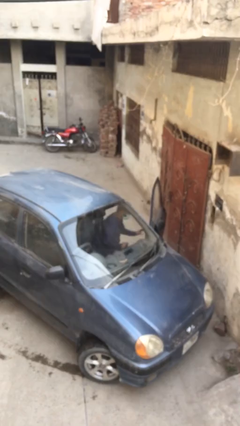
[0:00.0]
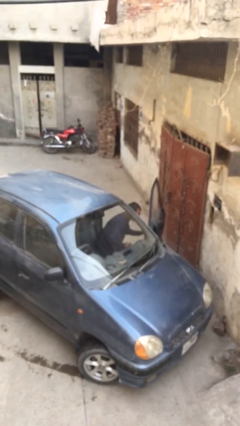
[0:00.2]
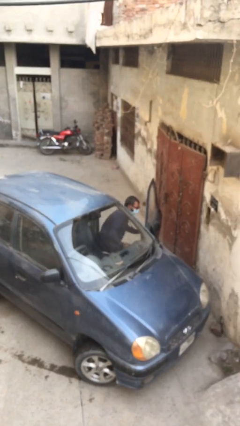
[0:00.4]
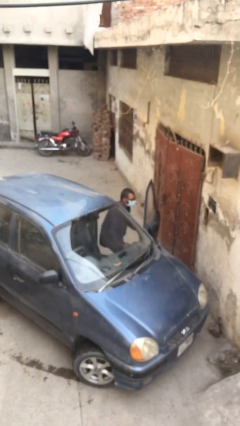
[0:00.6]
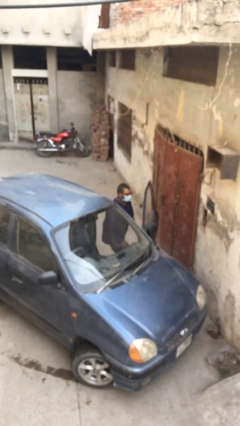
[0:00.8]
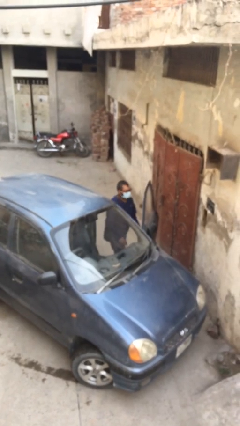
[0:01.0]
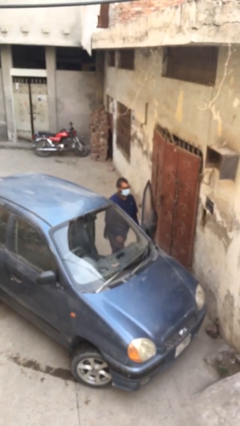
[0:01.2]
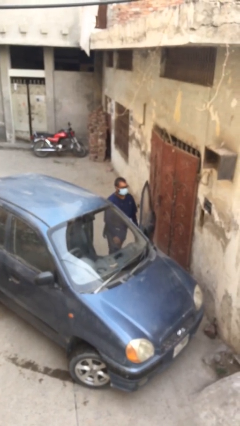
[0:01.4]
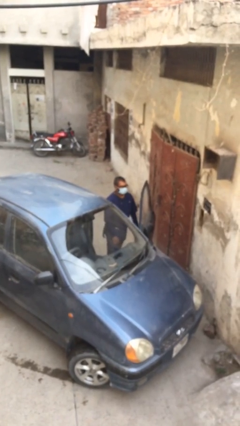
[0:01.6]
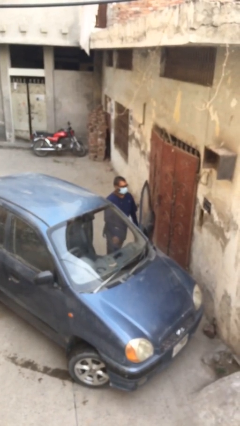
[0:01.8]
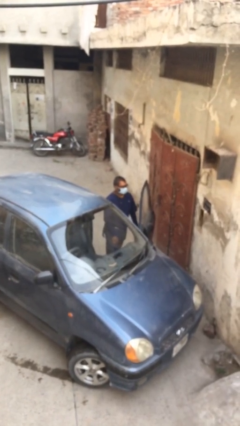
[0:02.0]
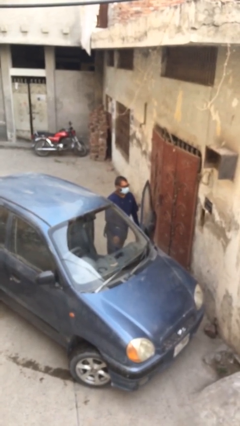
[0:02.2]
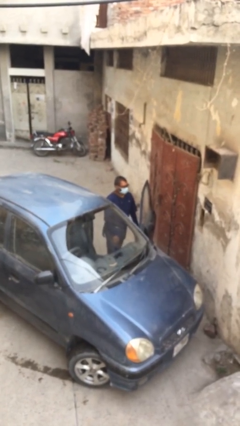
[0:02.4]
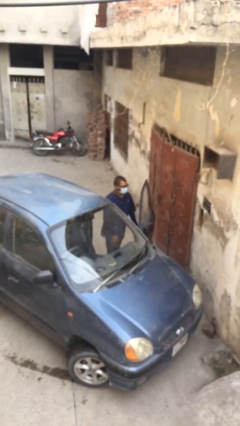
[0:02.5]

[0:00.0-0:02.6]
person exits car

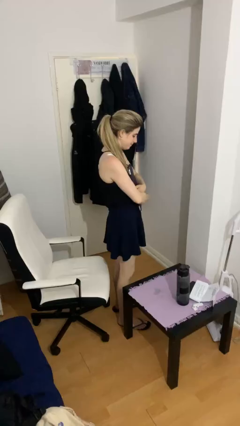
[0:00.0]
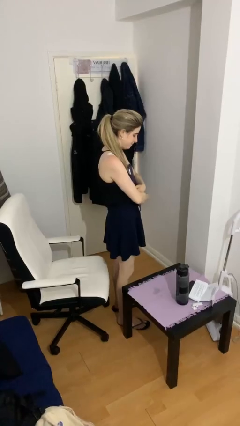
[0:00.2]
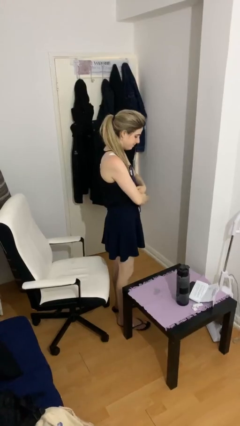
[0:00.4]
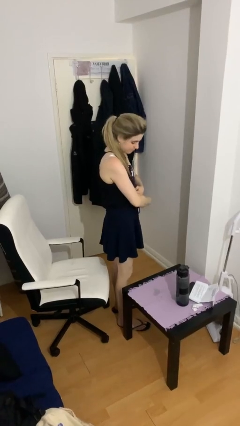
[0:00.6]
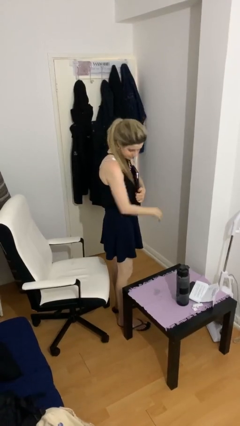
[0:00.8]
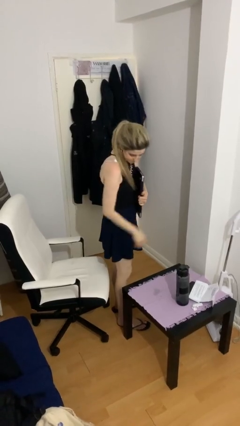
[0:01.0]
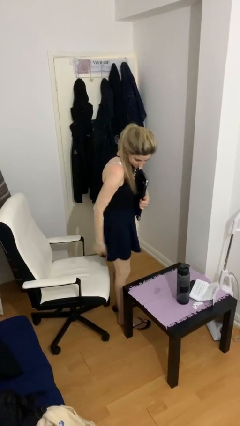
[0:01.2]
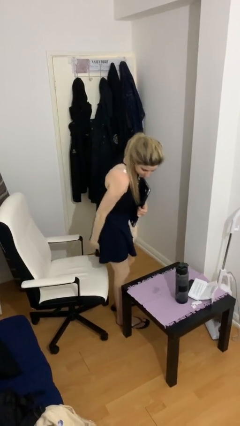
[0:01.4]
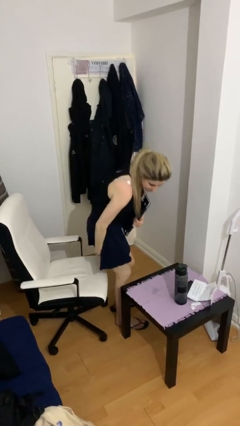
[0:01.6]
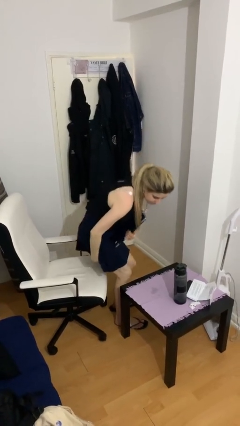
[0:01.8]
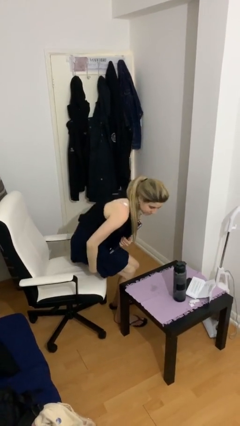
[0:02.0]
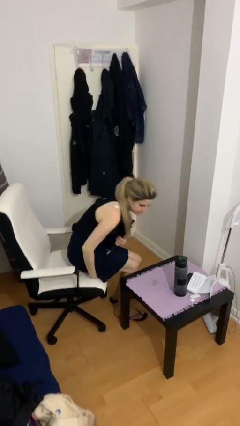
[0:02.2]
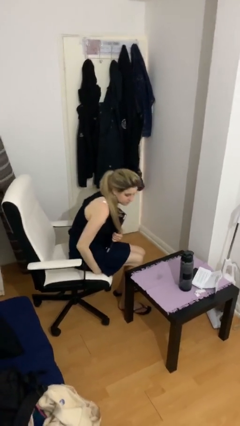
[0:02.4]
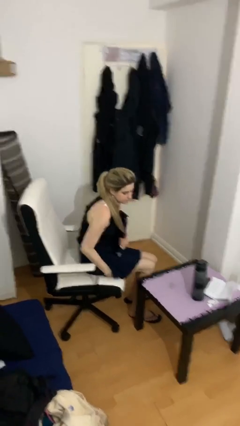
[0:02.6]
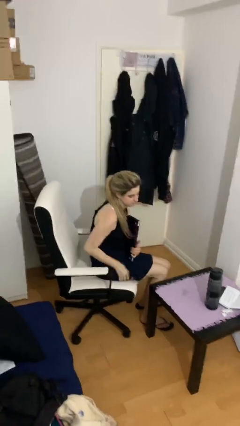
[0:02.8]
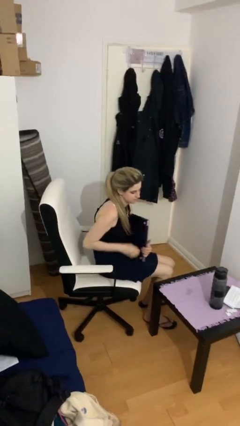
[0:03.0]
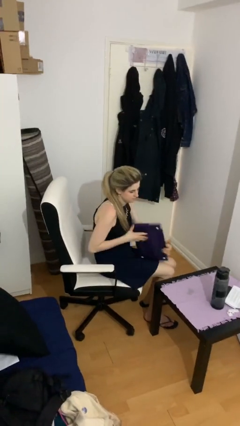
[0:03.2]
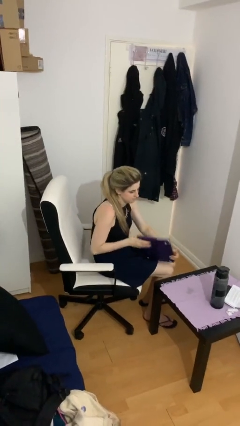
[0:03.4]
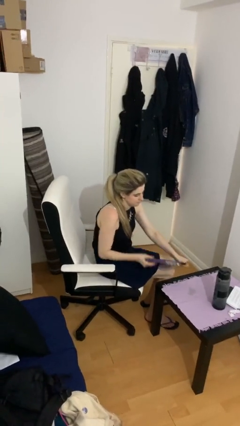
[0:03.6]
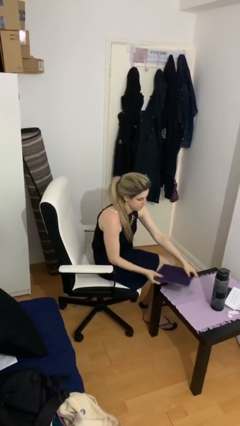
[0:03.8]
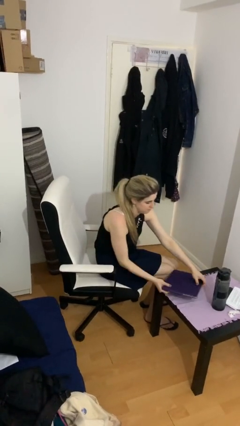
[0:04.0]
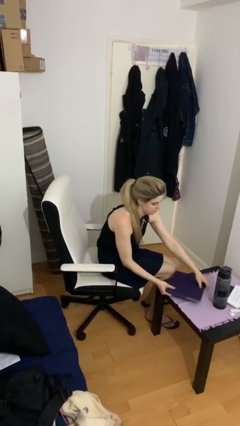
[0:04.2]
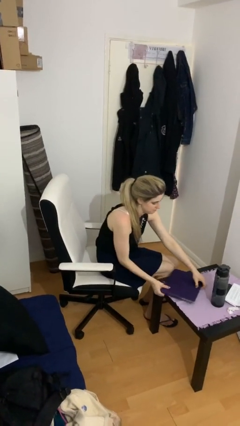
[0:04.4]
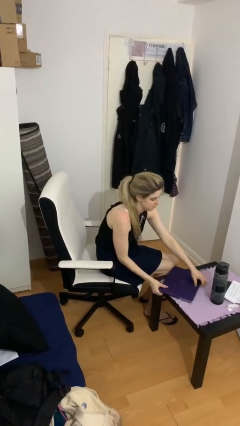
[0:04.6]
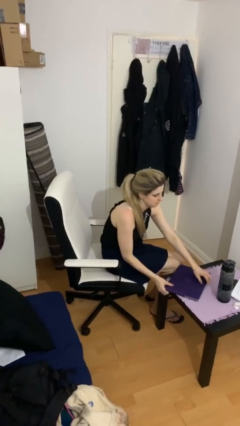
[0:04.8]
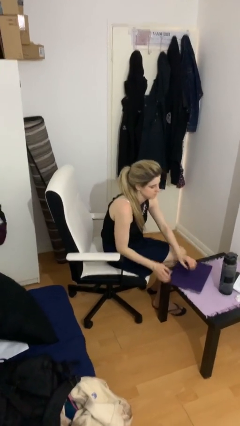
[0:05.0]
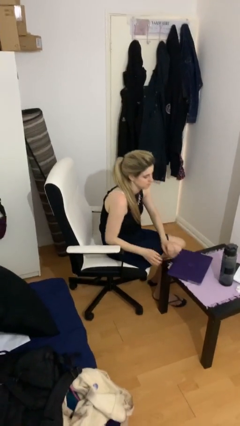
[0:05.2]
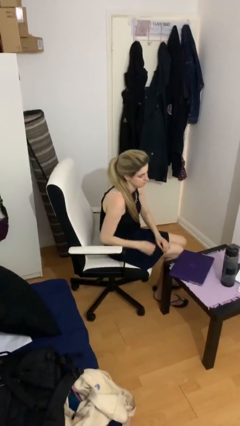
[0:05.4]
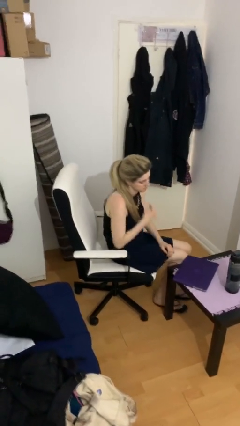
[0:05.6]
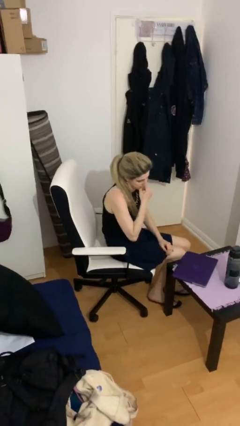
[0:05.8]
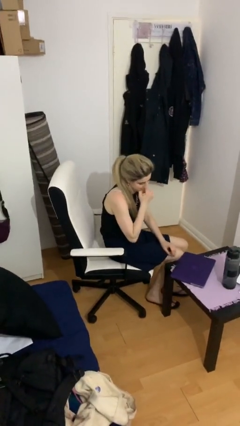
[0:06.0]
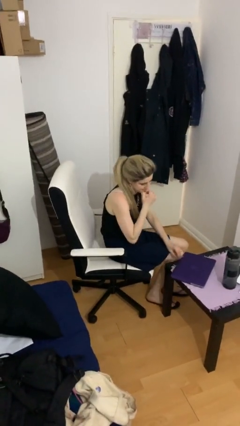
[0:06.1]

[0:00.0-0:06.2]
person sits down

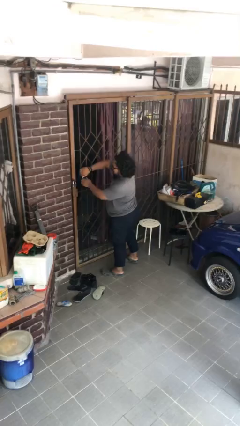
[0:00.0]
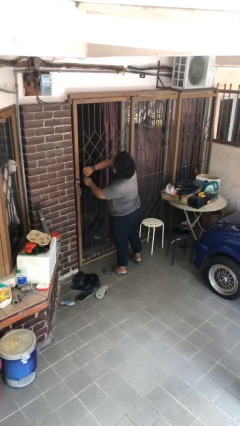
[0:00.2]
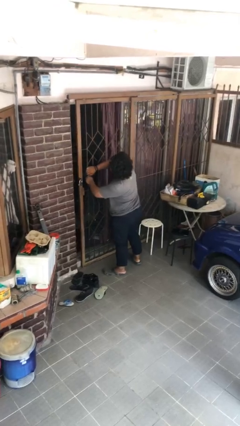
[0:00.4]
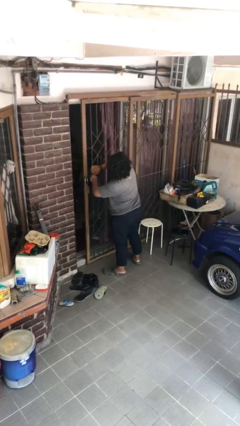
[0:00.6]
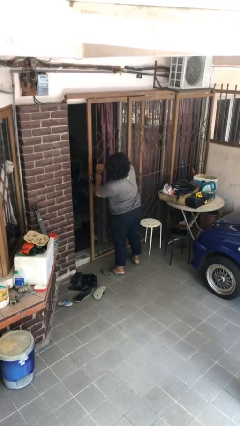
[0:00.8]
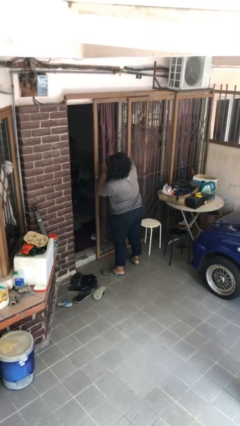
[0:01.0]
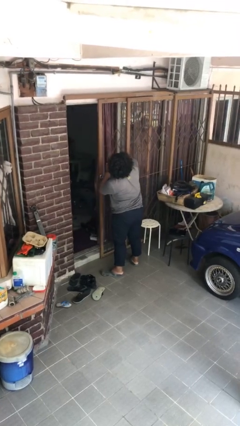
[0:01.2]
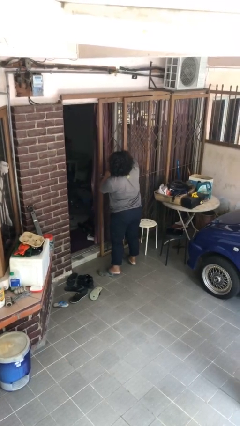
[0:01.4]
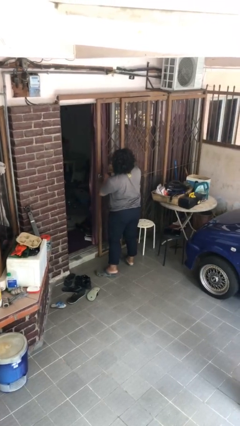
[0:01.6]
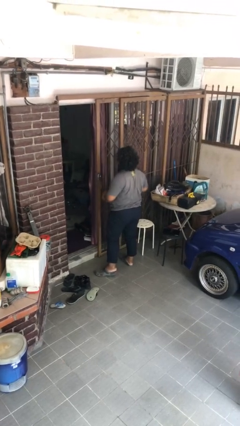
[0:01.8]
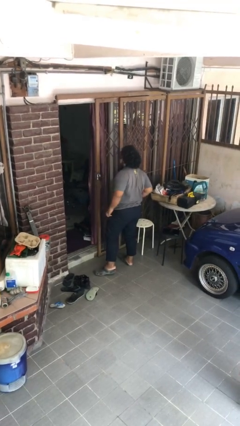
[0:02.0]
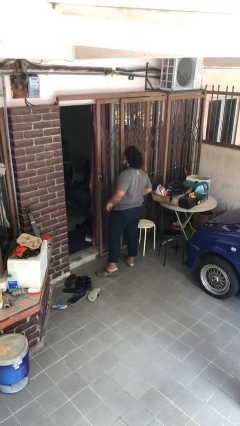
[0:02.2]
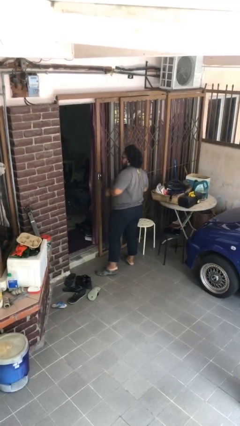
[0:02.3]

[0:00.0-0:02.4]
person opens facility door

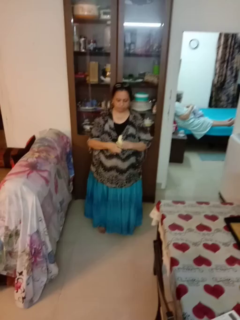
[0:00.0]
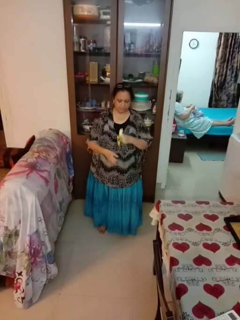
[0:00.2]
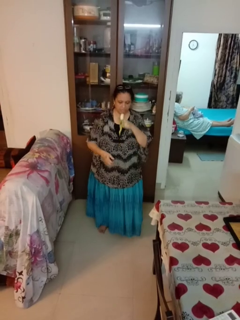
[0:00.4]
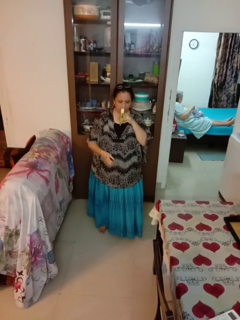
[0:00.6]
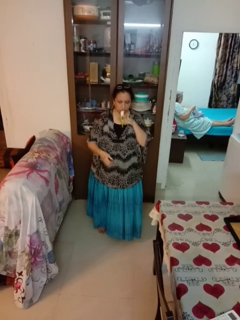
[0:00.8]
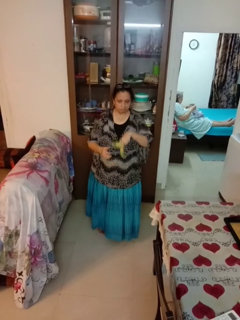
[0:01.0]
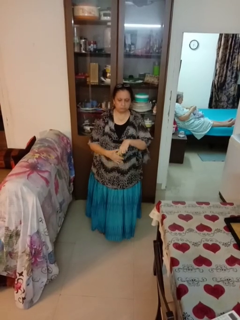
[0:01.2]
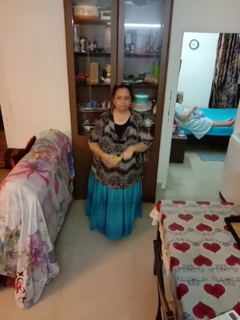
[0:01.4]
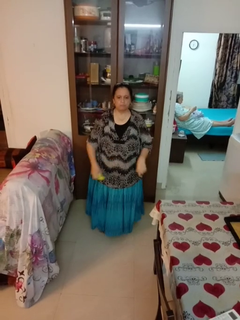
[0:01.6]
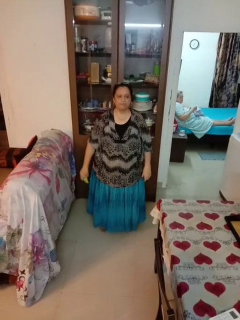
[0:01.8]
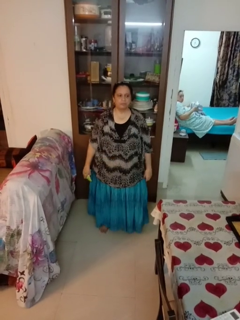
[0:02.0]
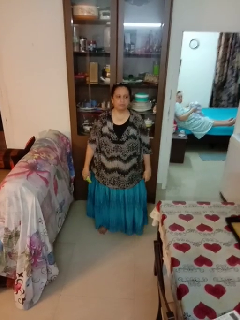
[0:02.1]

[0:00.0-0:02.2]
person eats banana

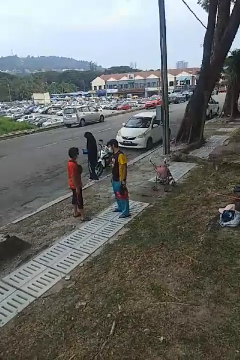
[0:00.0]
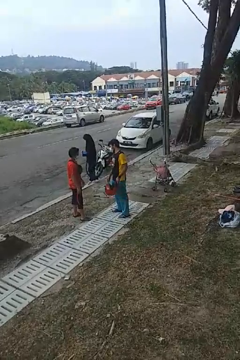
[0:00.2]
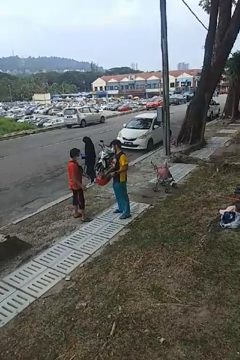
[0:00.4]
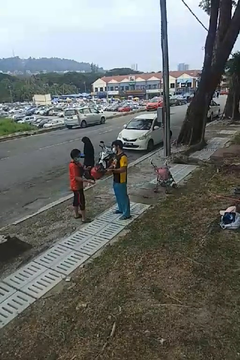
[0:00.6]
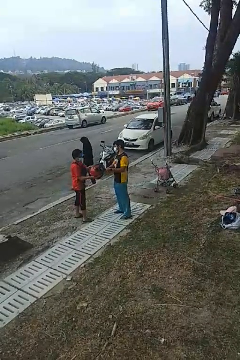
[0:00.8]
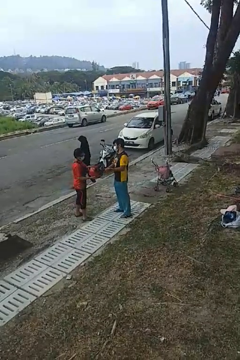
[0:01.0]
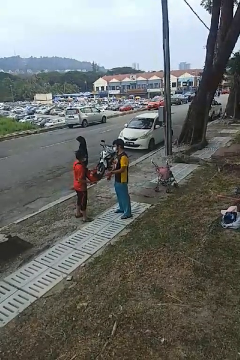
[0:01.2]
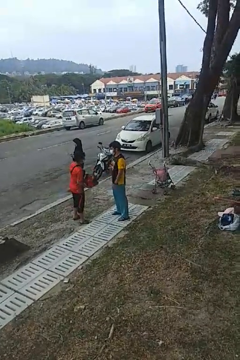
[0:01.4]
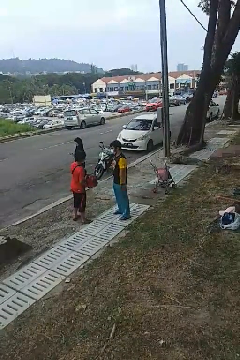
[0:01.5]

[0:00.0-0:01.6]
person transfers object to person

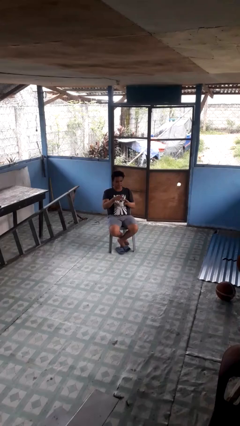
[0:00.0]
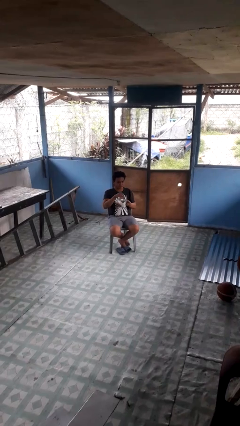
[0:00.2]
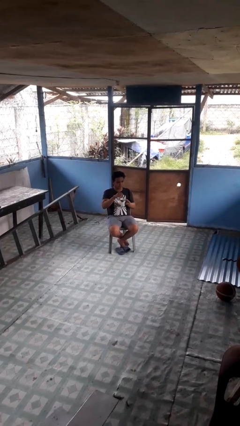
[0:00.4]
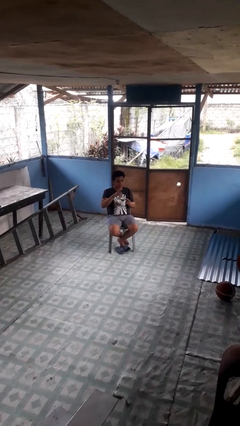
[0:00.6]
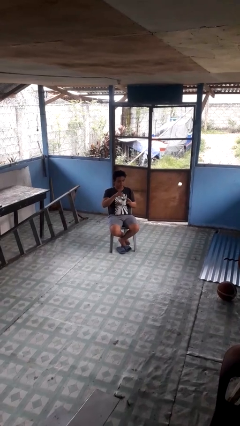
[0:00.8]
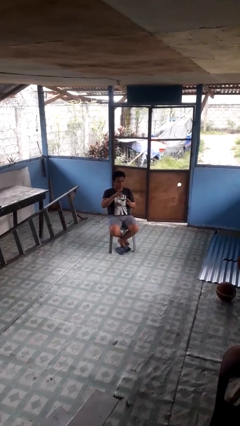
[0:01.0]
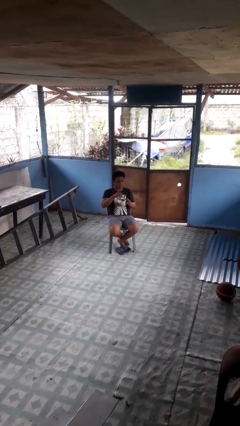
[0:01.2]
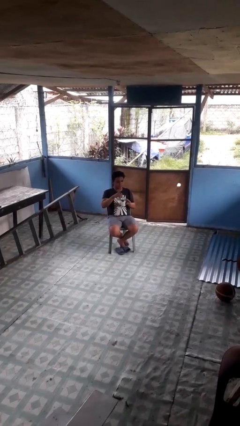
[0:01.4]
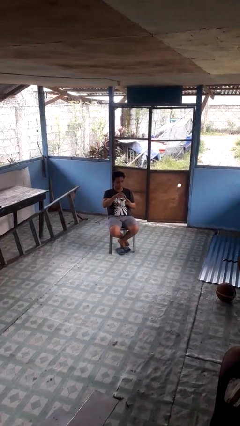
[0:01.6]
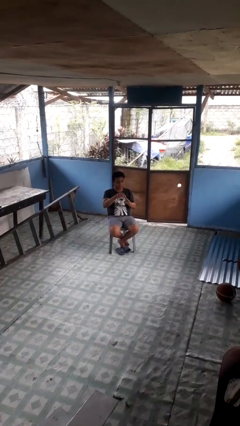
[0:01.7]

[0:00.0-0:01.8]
person stirs mug

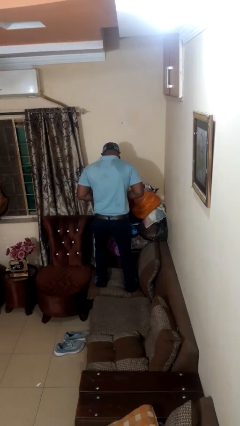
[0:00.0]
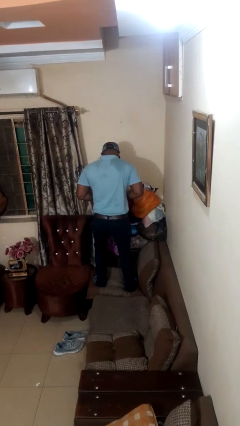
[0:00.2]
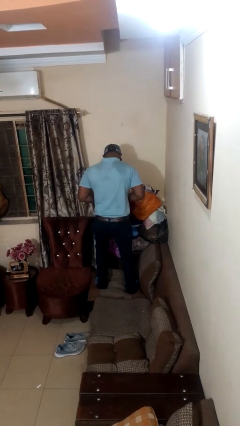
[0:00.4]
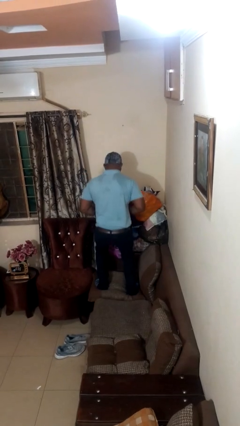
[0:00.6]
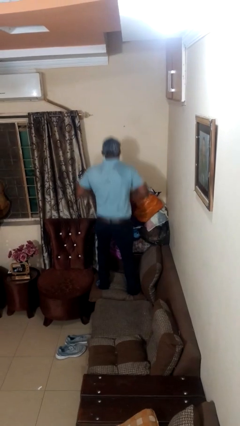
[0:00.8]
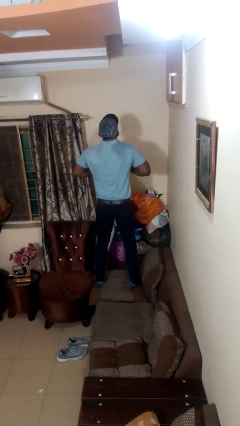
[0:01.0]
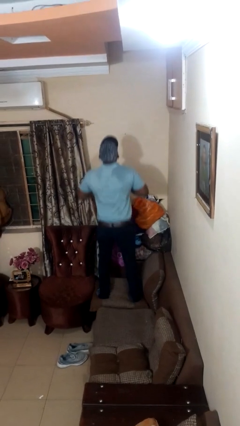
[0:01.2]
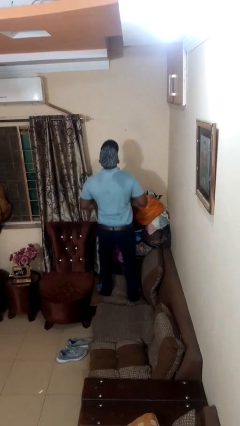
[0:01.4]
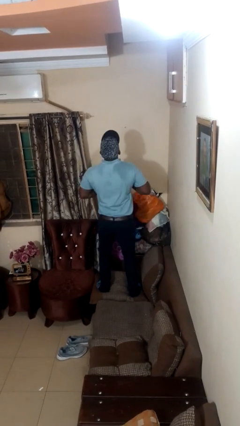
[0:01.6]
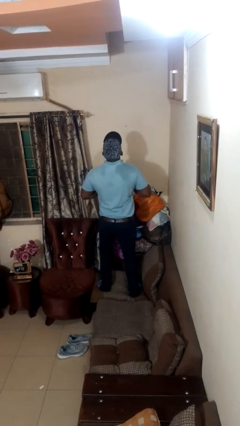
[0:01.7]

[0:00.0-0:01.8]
person jumps on couch
